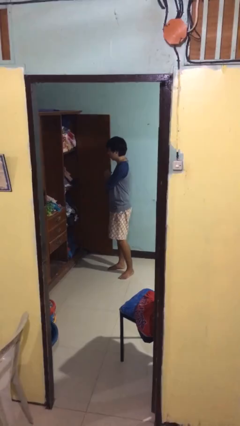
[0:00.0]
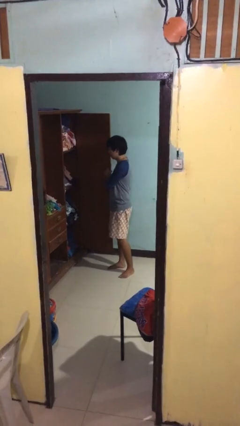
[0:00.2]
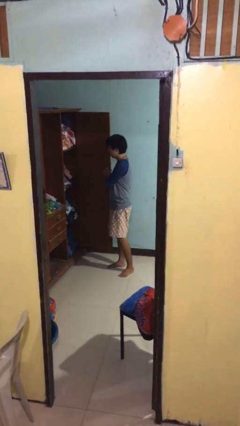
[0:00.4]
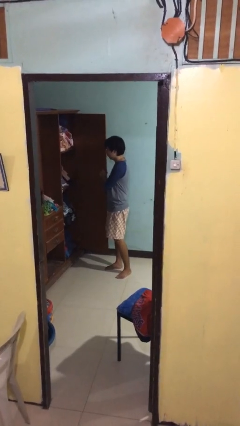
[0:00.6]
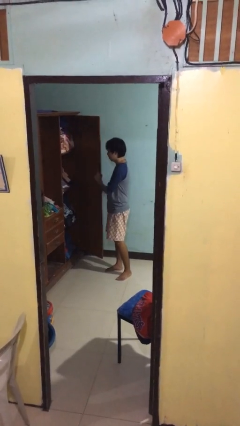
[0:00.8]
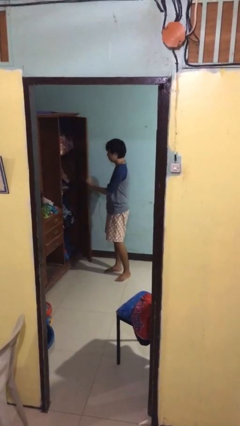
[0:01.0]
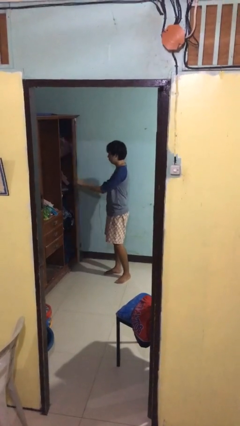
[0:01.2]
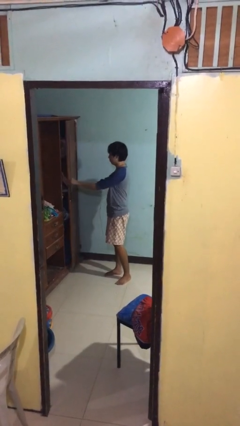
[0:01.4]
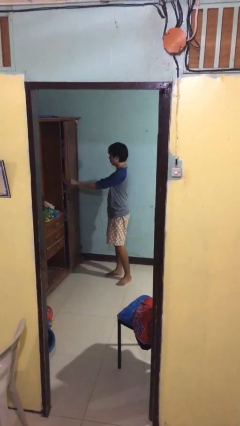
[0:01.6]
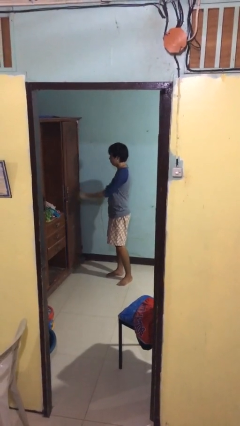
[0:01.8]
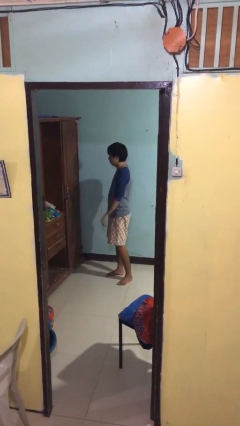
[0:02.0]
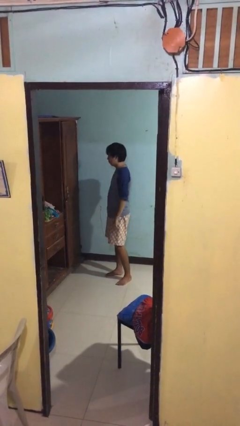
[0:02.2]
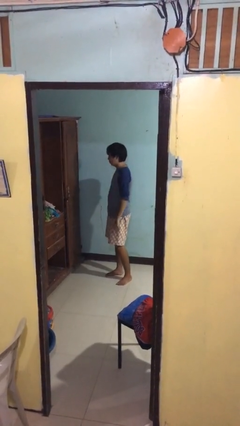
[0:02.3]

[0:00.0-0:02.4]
person closes closet door

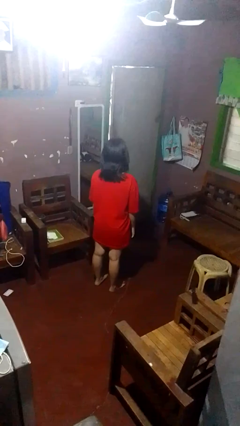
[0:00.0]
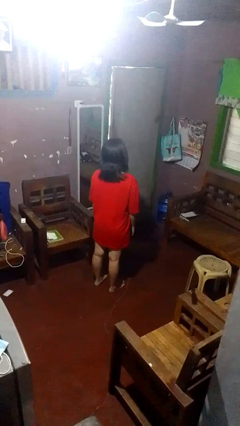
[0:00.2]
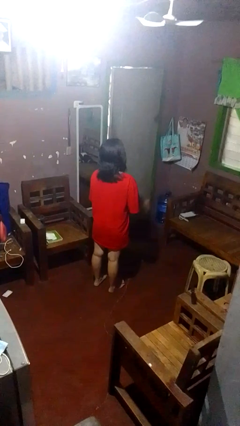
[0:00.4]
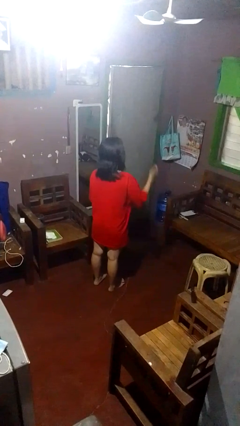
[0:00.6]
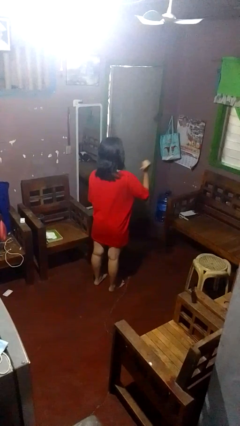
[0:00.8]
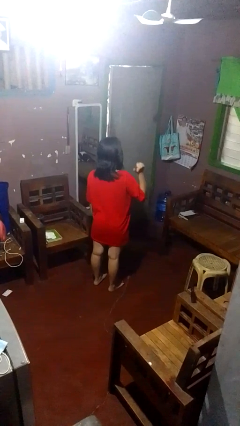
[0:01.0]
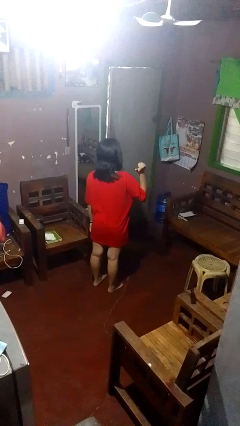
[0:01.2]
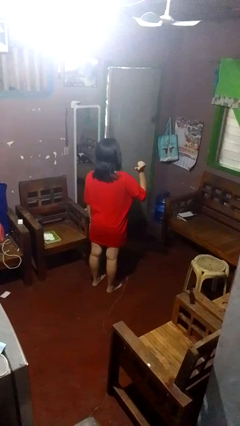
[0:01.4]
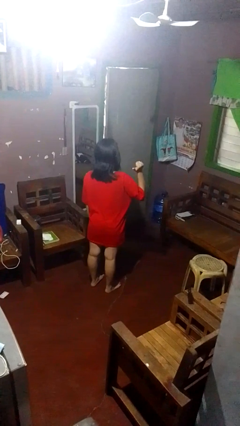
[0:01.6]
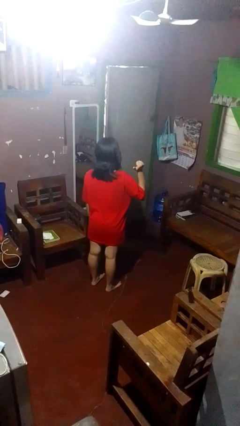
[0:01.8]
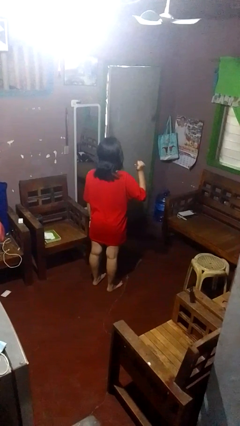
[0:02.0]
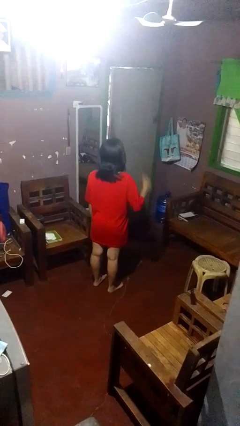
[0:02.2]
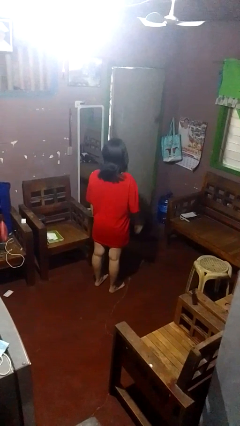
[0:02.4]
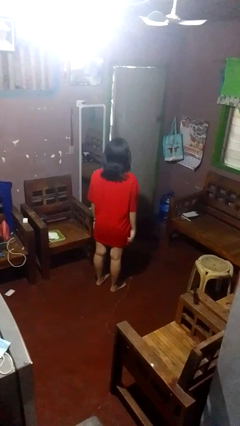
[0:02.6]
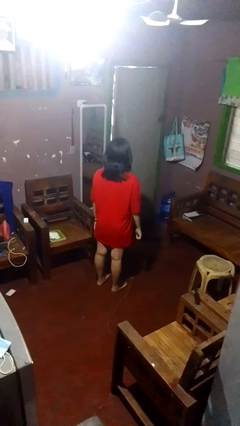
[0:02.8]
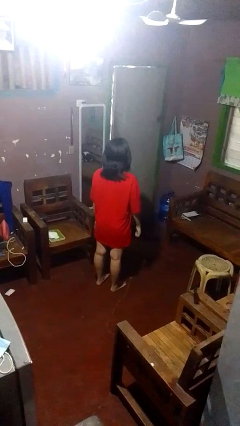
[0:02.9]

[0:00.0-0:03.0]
person gestures behind me

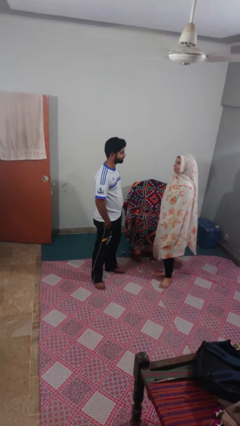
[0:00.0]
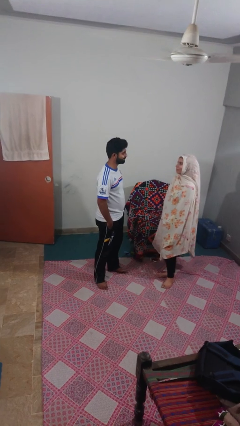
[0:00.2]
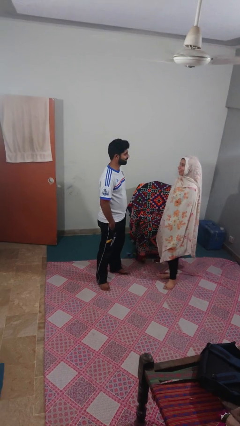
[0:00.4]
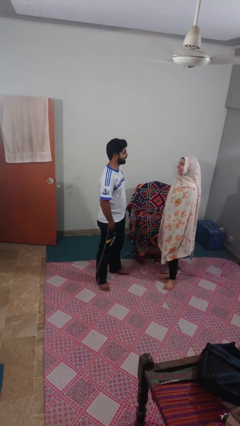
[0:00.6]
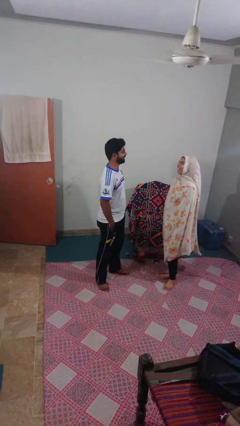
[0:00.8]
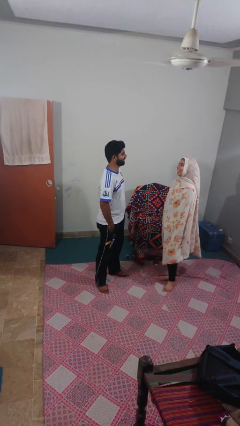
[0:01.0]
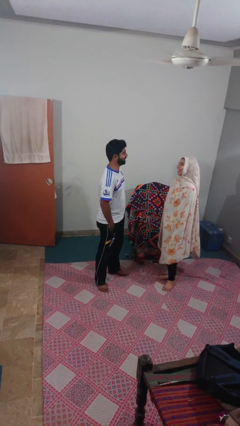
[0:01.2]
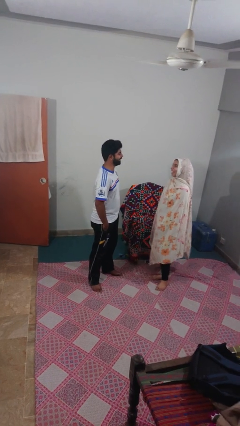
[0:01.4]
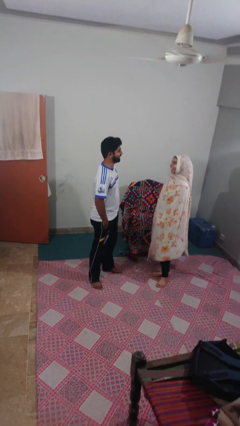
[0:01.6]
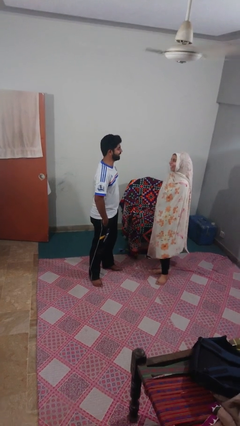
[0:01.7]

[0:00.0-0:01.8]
person laughs with person

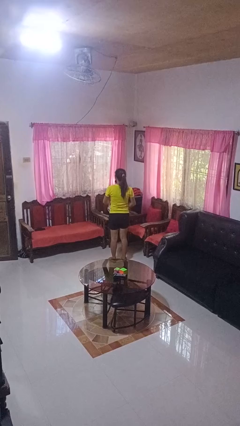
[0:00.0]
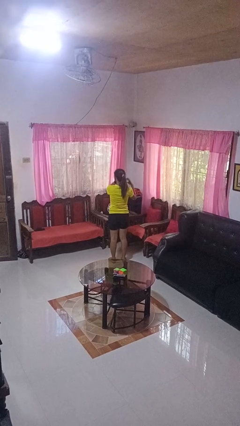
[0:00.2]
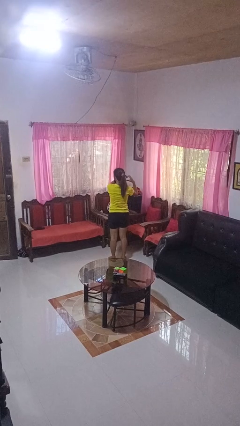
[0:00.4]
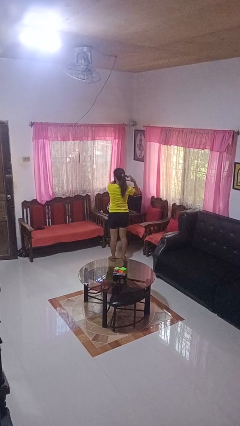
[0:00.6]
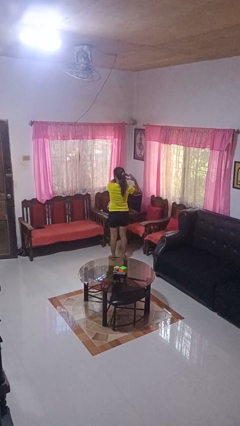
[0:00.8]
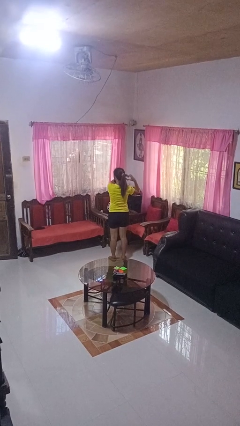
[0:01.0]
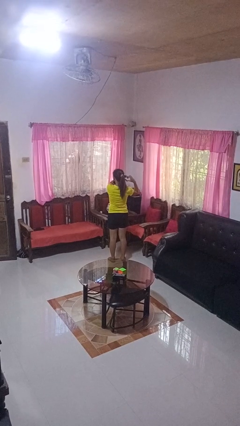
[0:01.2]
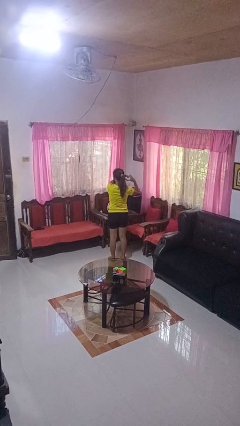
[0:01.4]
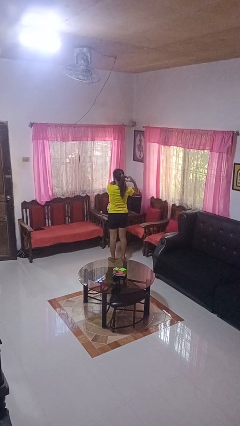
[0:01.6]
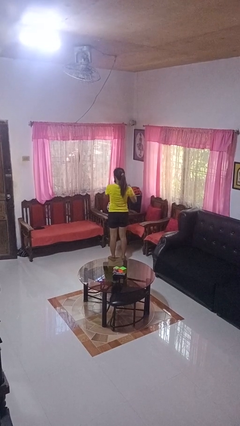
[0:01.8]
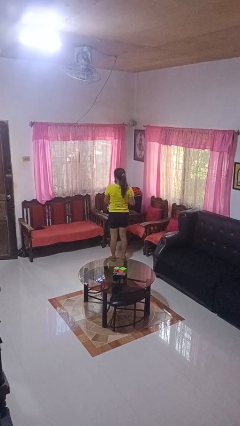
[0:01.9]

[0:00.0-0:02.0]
person gestures heart

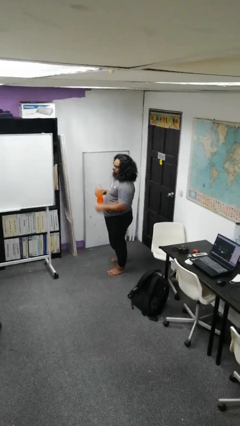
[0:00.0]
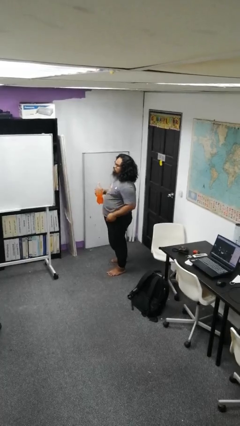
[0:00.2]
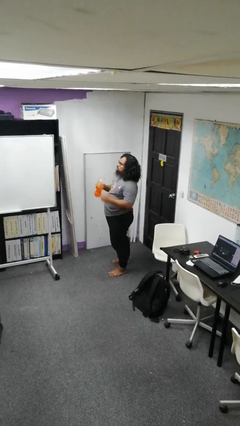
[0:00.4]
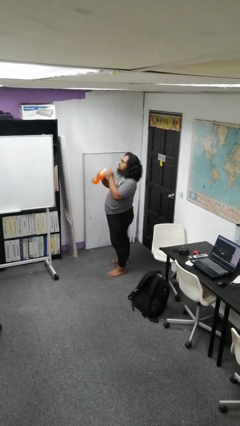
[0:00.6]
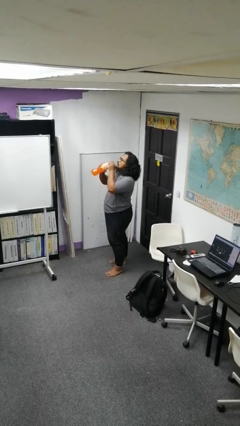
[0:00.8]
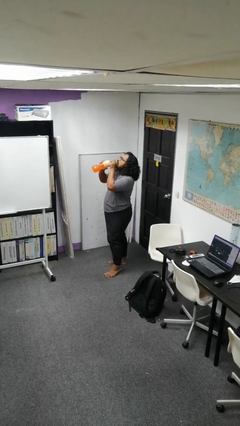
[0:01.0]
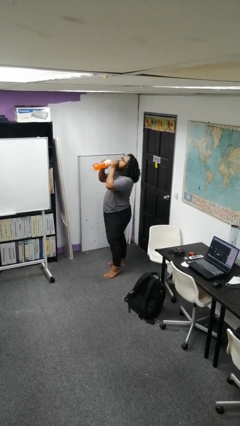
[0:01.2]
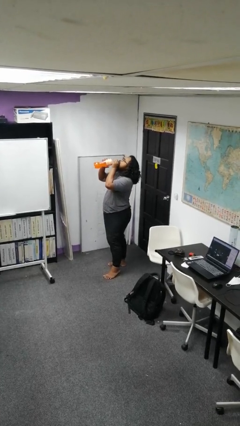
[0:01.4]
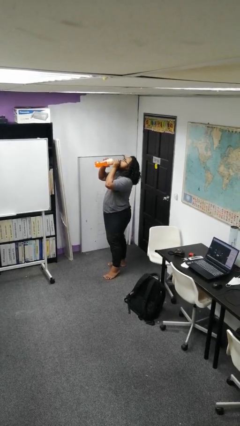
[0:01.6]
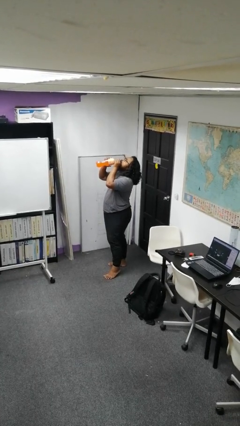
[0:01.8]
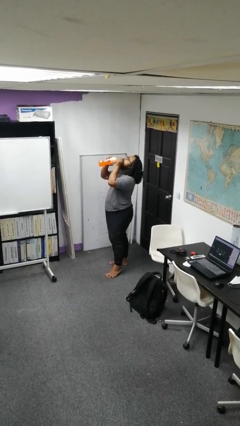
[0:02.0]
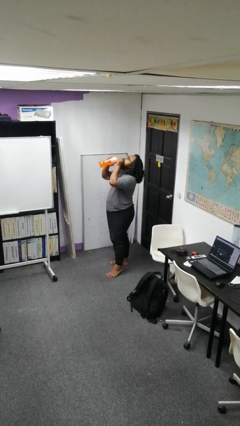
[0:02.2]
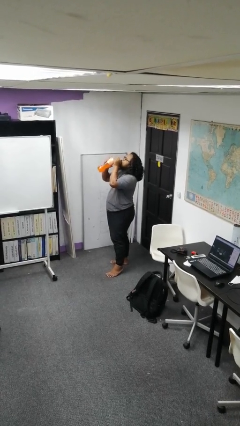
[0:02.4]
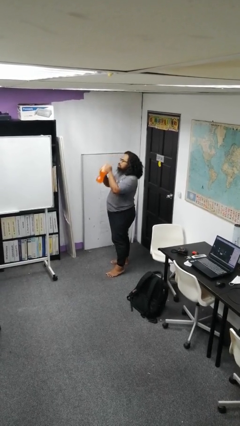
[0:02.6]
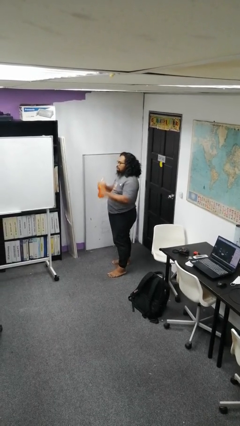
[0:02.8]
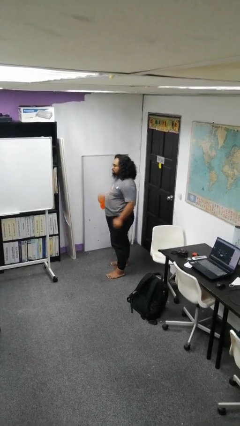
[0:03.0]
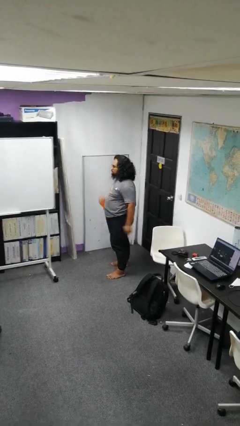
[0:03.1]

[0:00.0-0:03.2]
person drinks from bottle

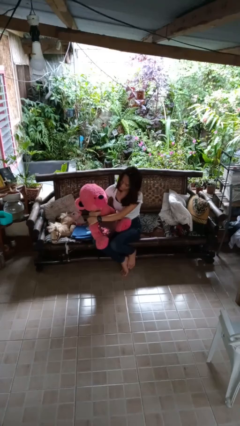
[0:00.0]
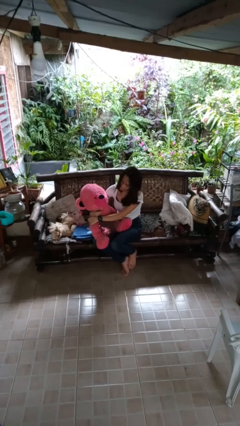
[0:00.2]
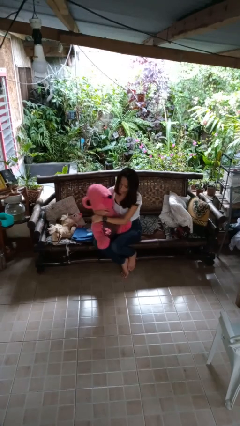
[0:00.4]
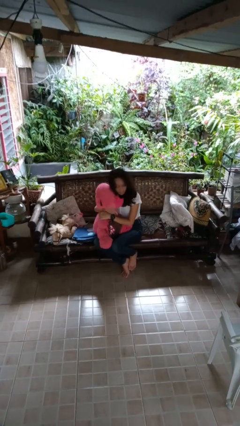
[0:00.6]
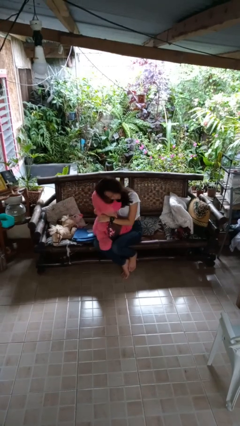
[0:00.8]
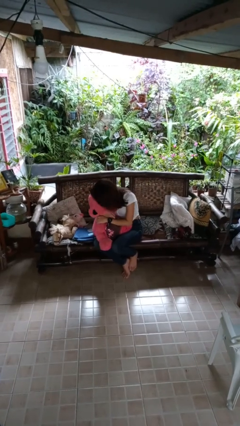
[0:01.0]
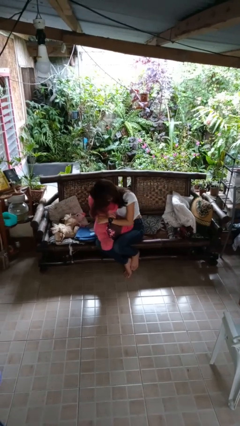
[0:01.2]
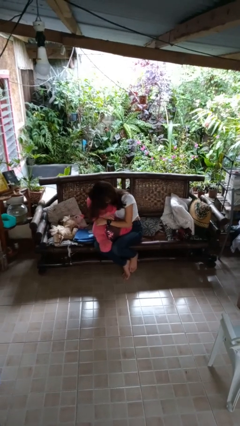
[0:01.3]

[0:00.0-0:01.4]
person hugs stuffed animal

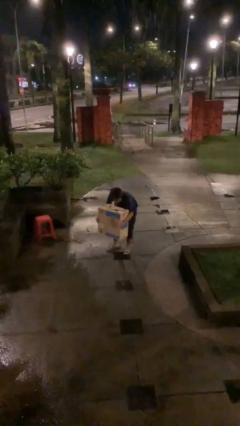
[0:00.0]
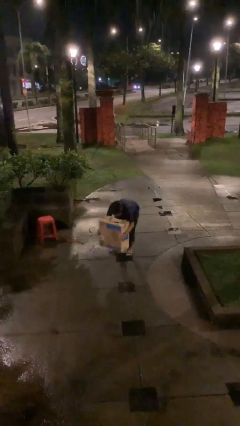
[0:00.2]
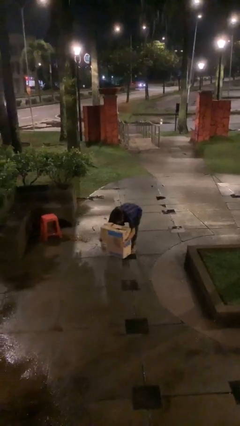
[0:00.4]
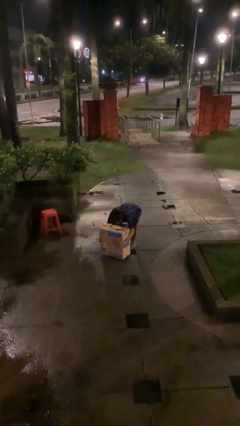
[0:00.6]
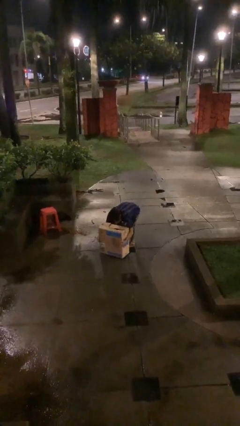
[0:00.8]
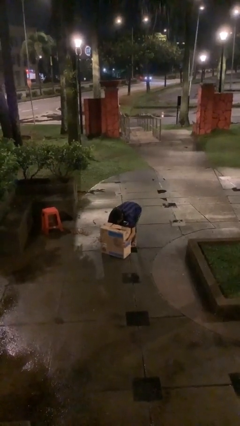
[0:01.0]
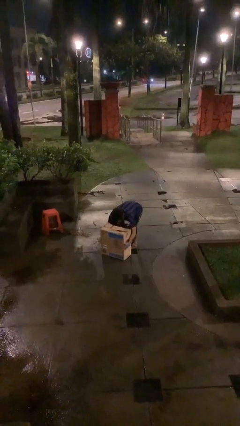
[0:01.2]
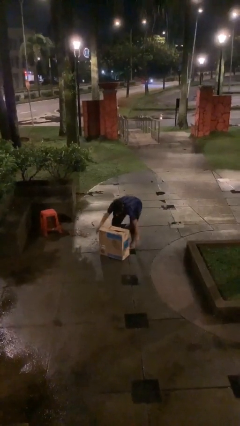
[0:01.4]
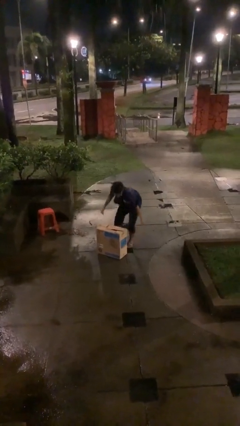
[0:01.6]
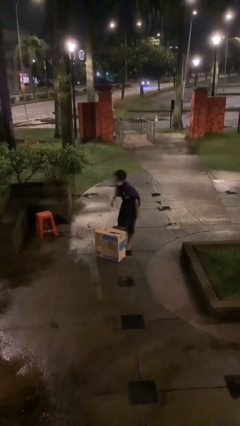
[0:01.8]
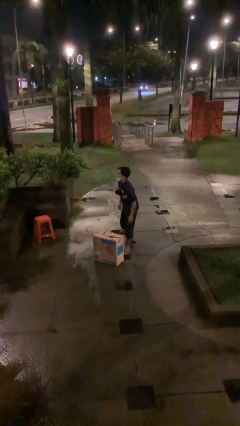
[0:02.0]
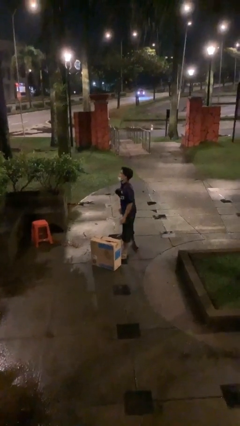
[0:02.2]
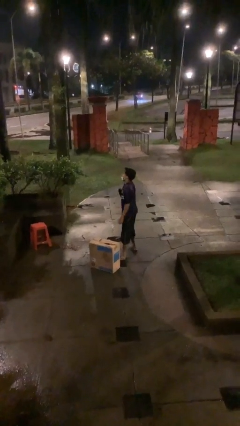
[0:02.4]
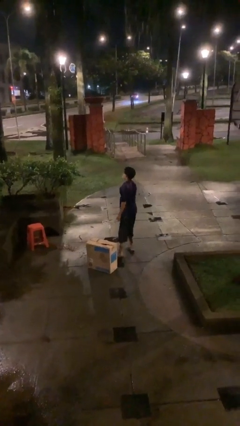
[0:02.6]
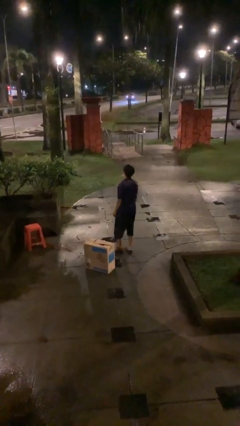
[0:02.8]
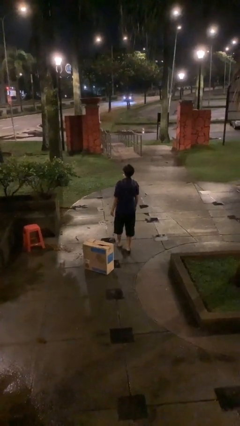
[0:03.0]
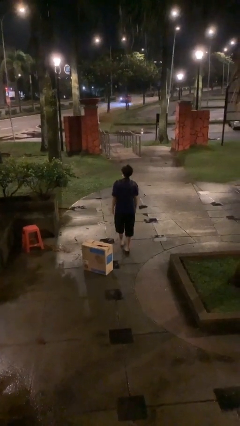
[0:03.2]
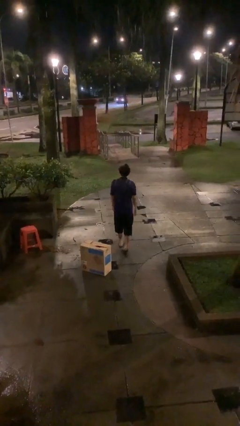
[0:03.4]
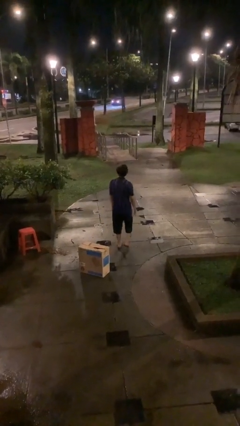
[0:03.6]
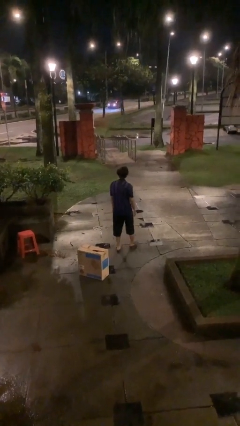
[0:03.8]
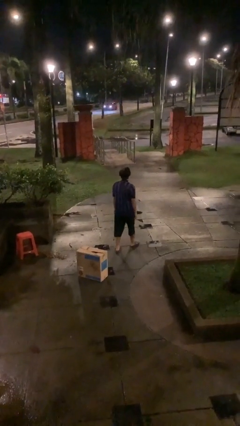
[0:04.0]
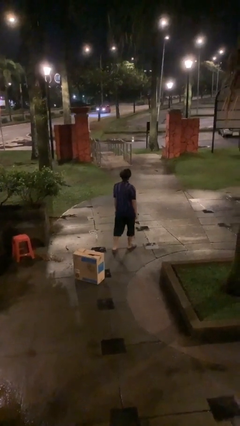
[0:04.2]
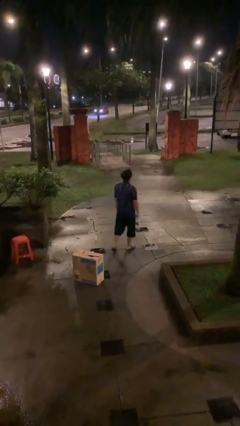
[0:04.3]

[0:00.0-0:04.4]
person puts down object on floor
